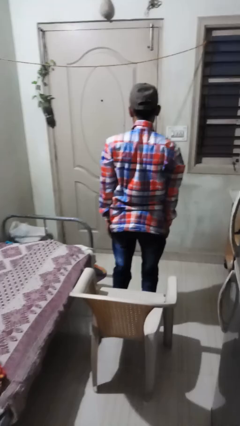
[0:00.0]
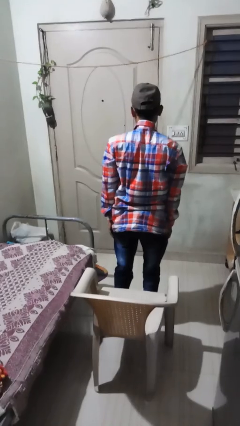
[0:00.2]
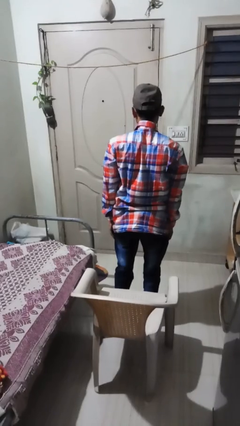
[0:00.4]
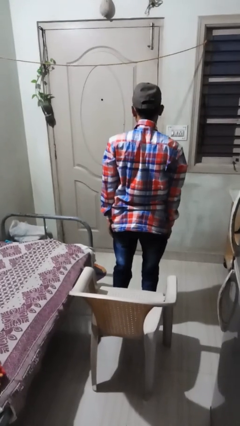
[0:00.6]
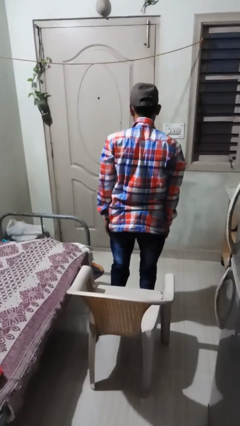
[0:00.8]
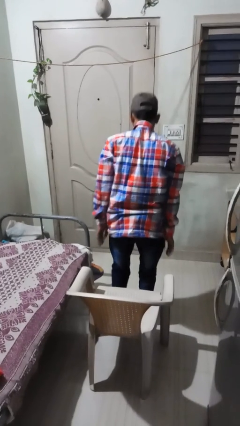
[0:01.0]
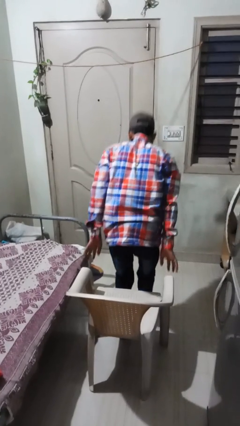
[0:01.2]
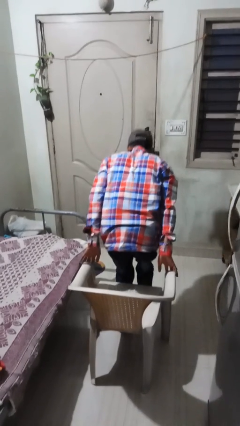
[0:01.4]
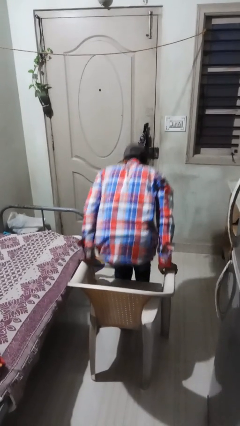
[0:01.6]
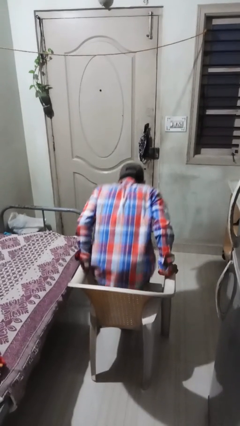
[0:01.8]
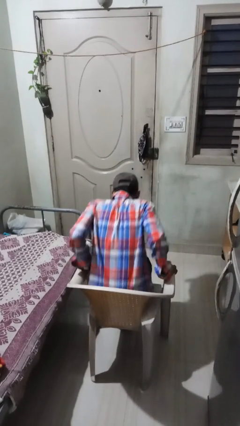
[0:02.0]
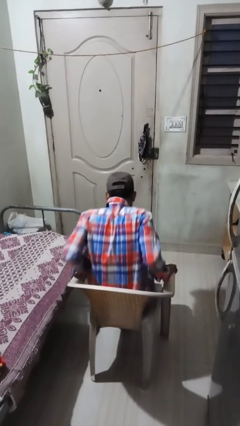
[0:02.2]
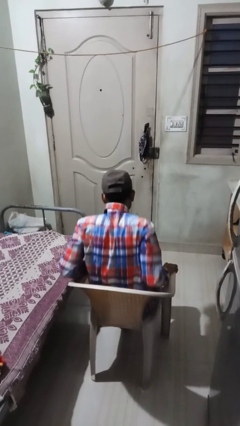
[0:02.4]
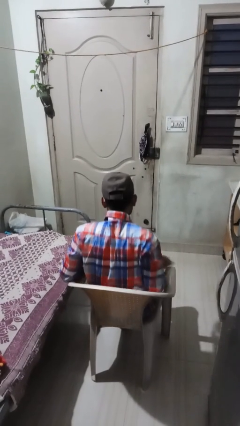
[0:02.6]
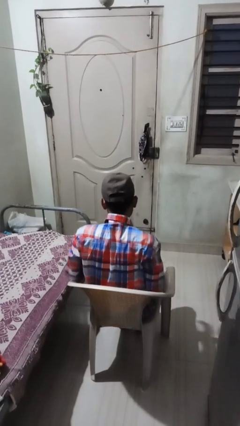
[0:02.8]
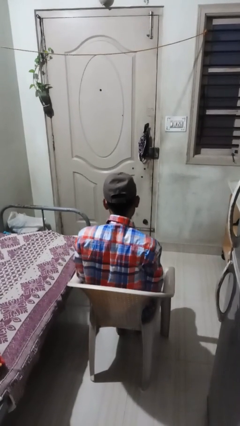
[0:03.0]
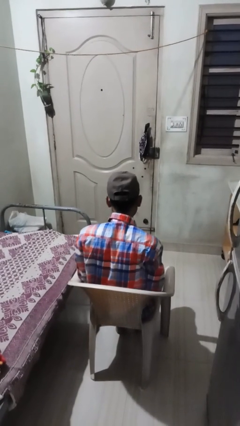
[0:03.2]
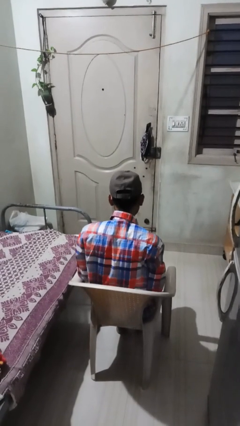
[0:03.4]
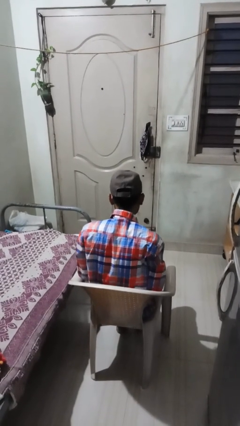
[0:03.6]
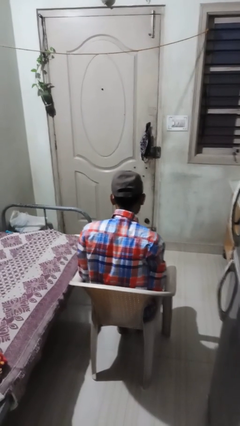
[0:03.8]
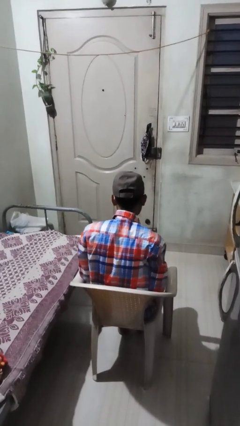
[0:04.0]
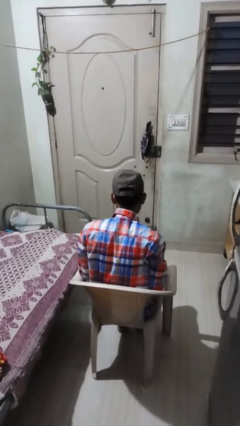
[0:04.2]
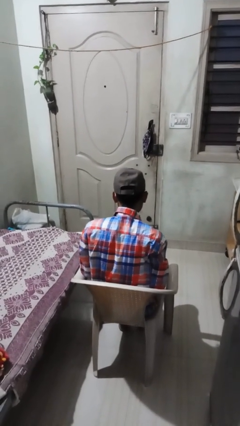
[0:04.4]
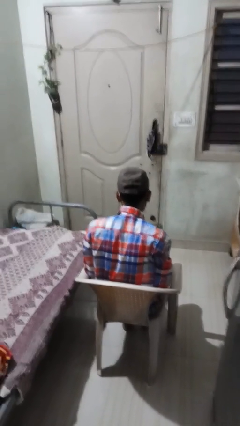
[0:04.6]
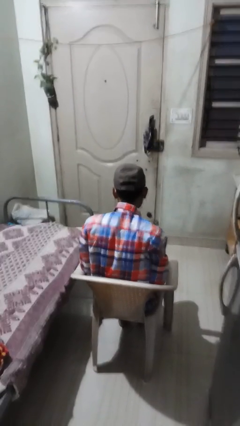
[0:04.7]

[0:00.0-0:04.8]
person sits down

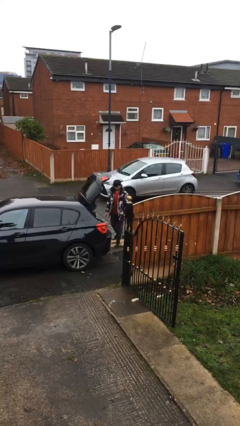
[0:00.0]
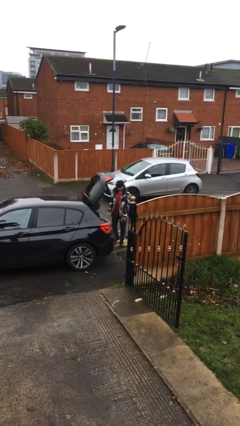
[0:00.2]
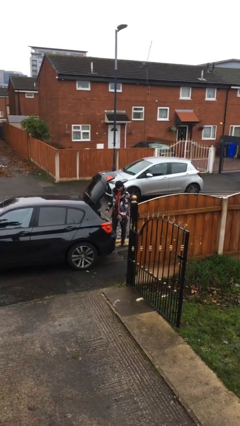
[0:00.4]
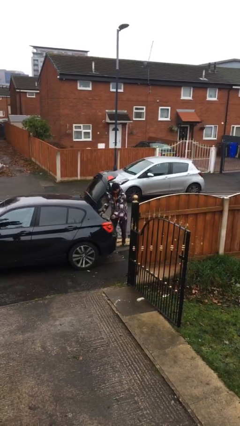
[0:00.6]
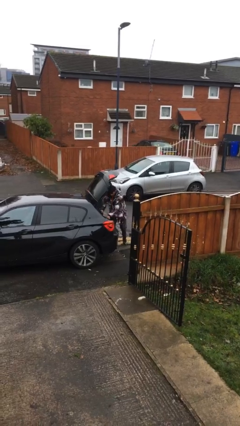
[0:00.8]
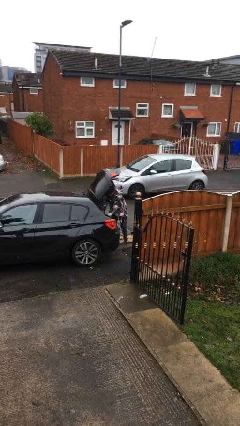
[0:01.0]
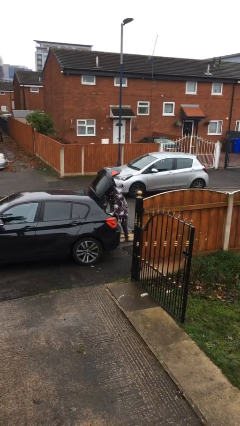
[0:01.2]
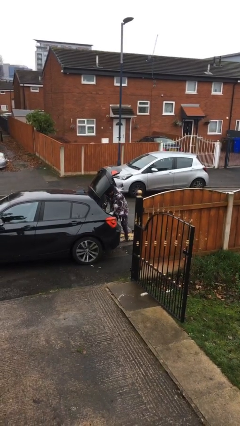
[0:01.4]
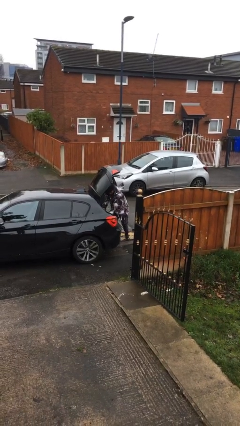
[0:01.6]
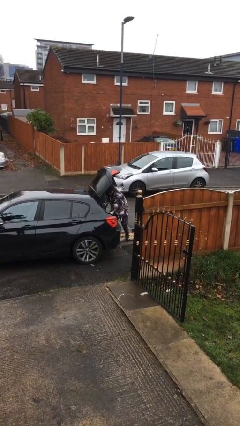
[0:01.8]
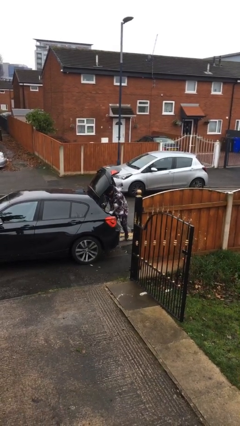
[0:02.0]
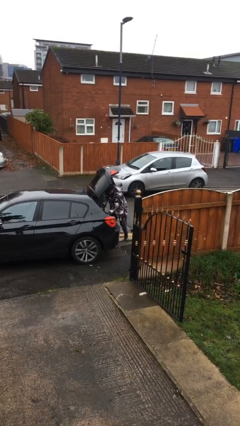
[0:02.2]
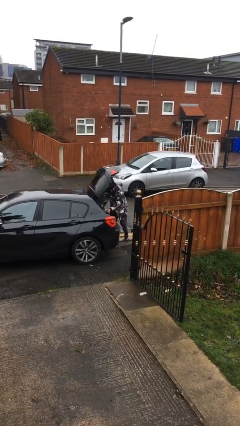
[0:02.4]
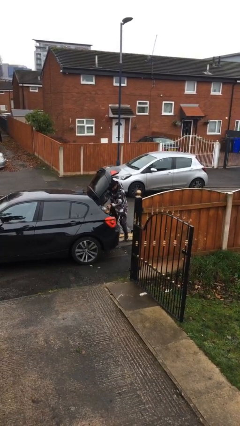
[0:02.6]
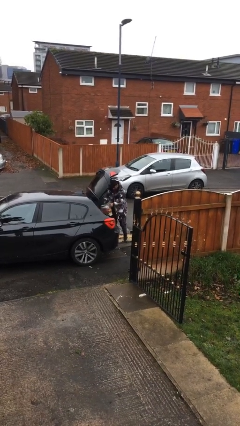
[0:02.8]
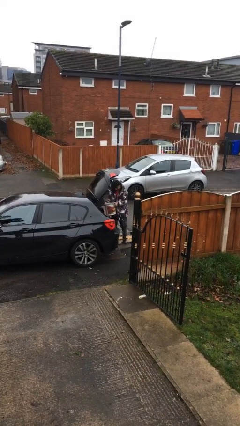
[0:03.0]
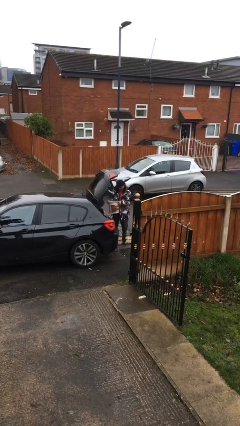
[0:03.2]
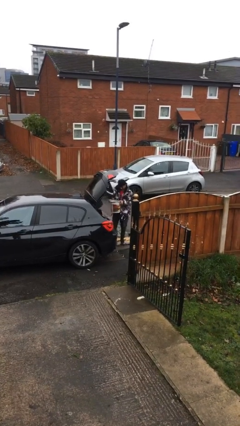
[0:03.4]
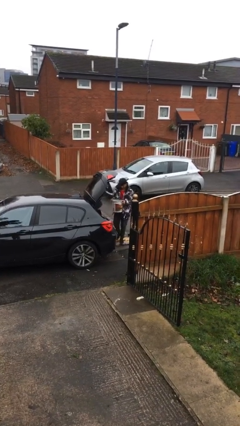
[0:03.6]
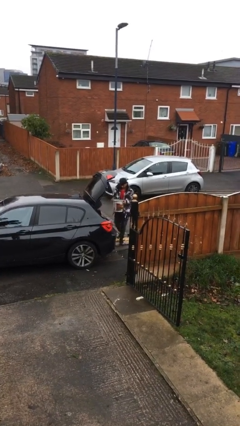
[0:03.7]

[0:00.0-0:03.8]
person unloads car

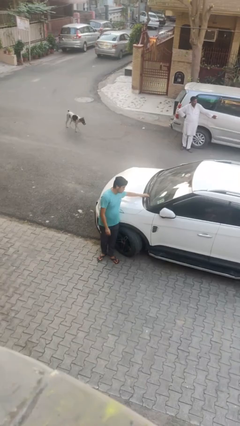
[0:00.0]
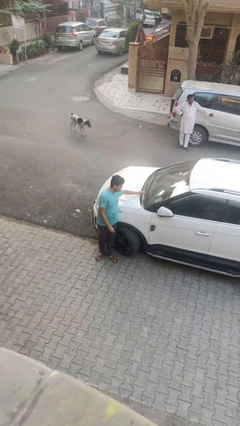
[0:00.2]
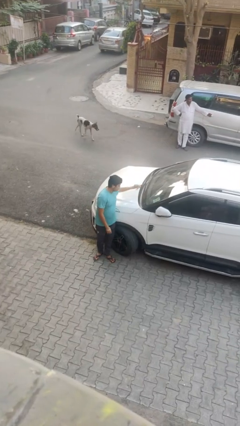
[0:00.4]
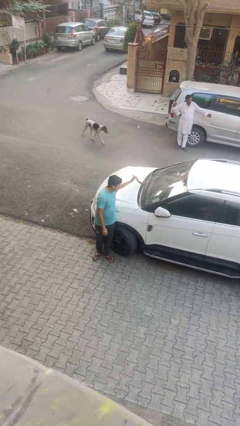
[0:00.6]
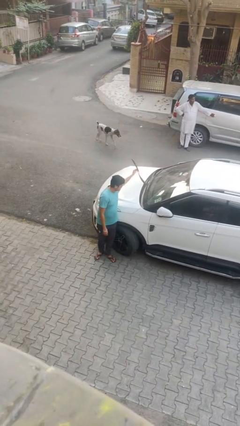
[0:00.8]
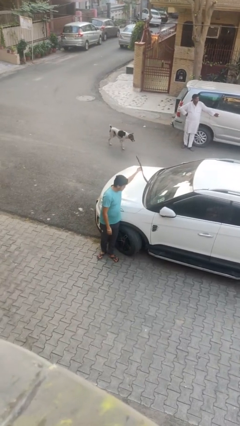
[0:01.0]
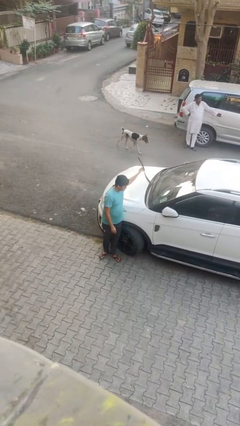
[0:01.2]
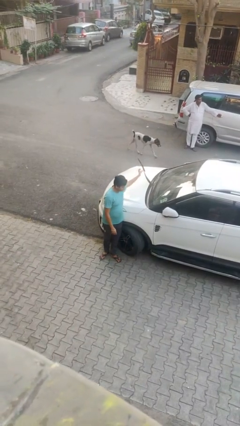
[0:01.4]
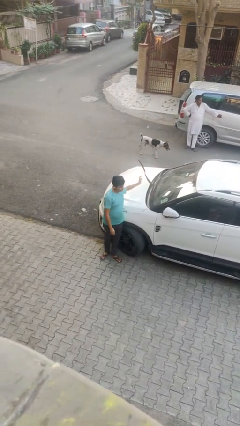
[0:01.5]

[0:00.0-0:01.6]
person flips up car wipers

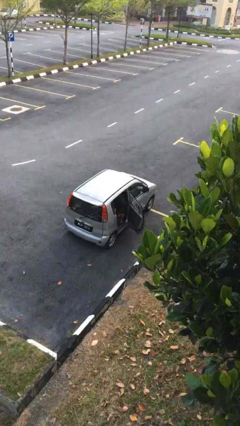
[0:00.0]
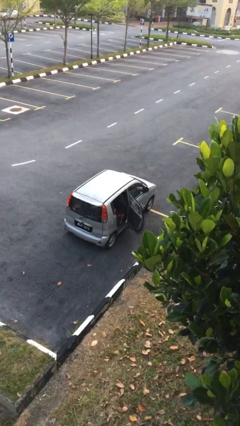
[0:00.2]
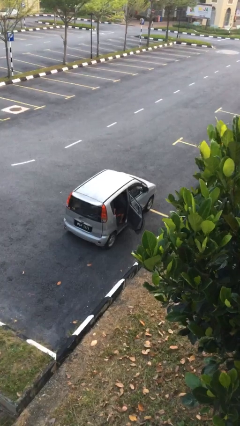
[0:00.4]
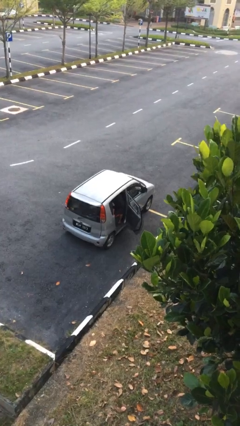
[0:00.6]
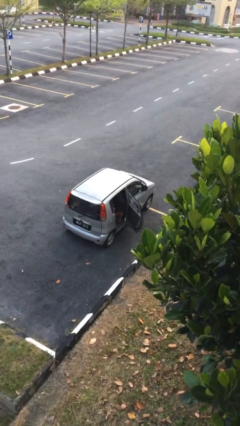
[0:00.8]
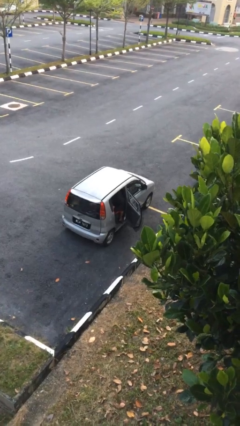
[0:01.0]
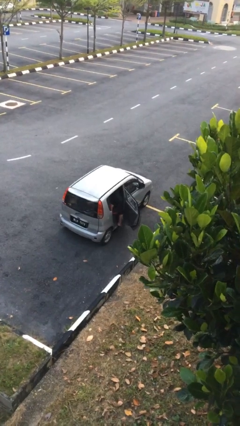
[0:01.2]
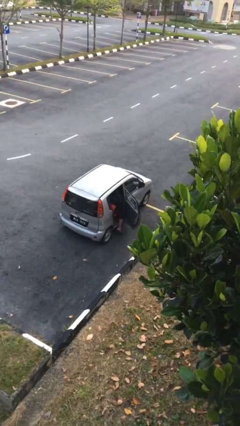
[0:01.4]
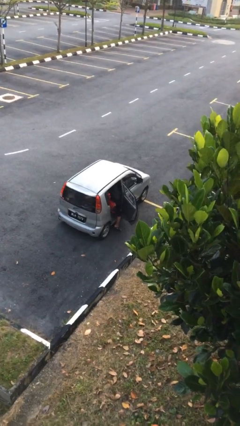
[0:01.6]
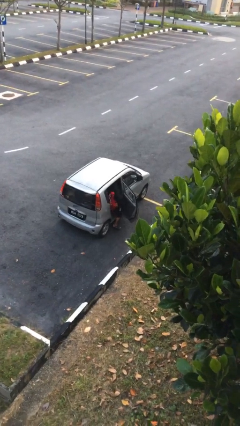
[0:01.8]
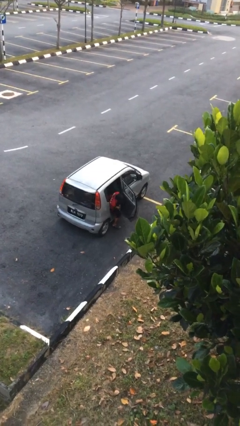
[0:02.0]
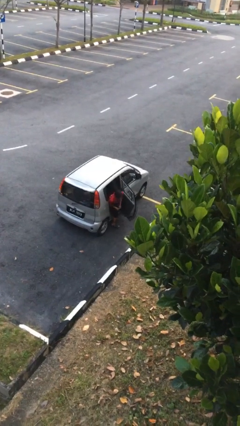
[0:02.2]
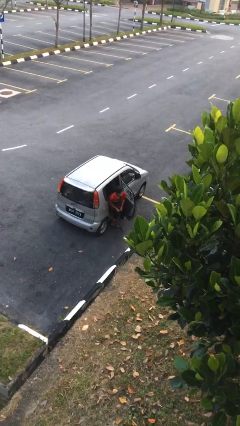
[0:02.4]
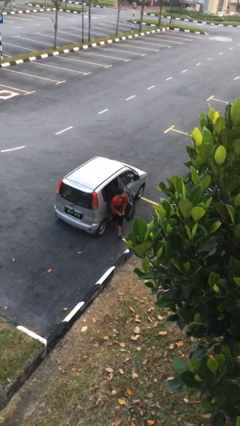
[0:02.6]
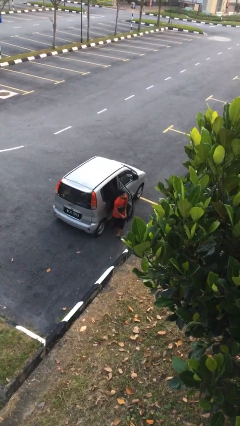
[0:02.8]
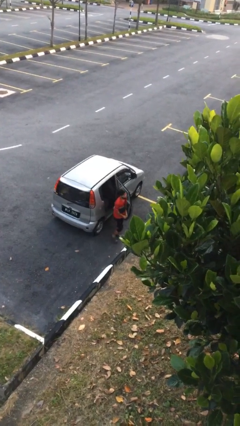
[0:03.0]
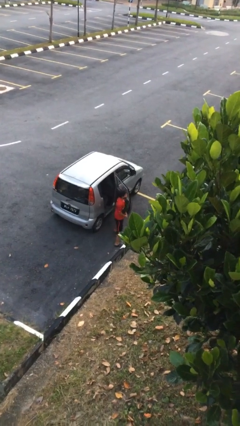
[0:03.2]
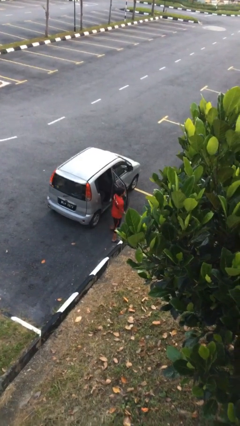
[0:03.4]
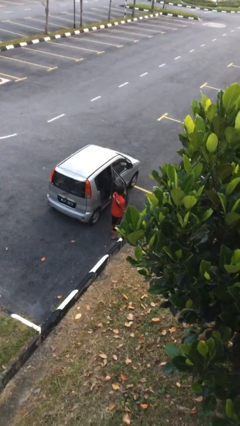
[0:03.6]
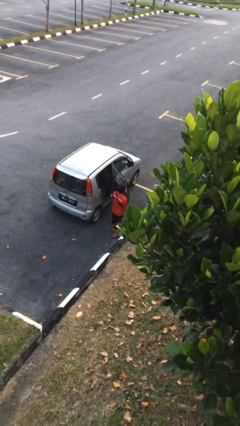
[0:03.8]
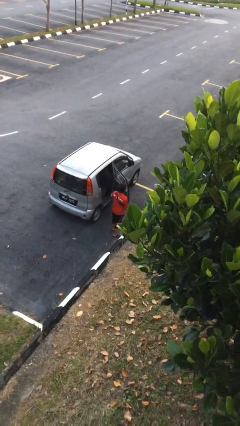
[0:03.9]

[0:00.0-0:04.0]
person exits car

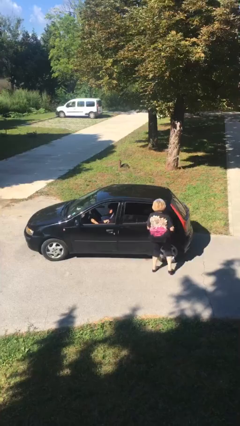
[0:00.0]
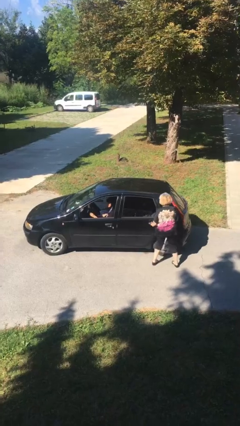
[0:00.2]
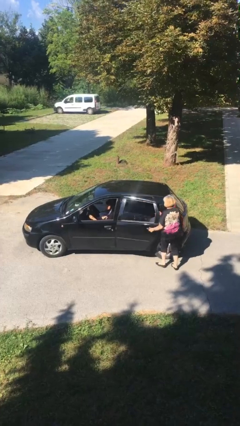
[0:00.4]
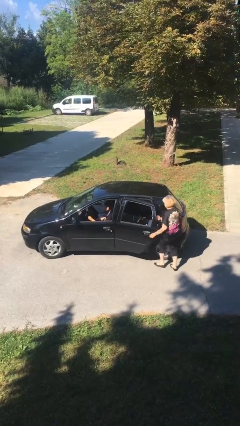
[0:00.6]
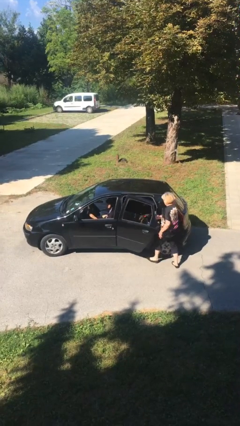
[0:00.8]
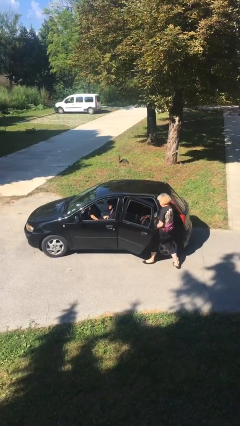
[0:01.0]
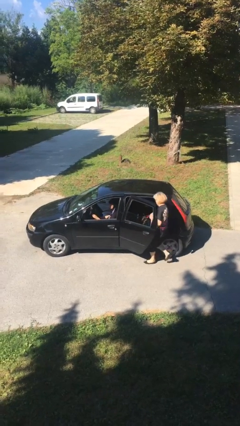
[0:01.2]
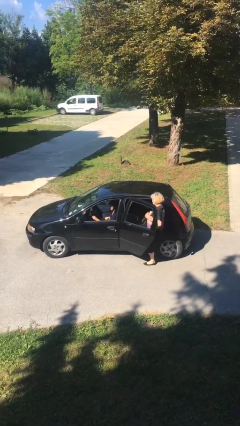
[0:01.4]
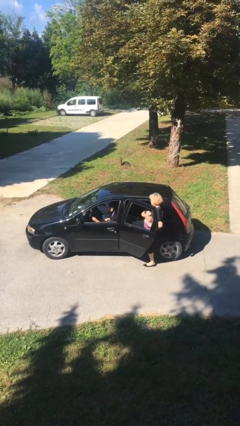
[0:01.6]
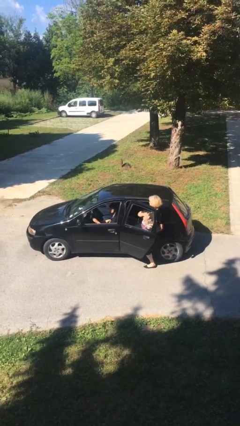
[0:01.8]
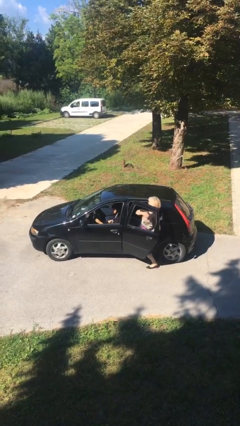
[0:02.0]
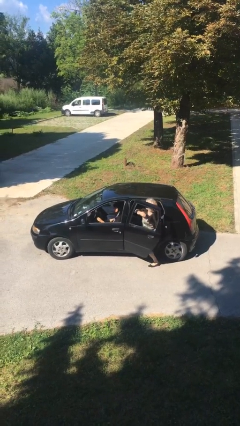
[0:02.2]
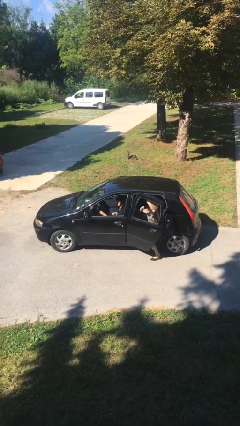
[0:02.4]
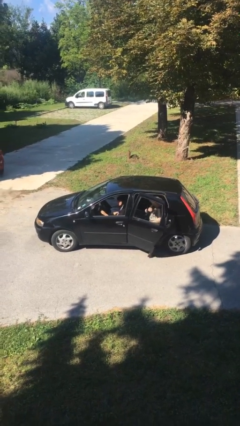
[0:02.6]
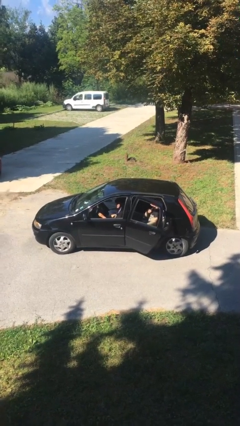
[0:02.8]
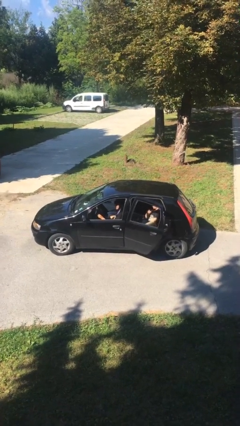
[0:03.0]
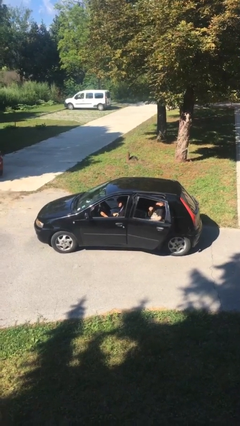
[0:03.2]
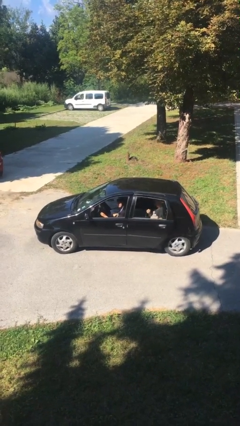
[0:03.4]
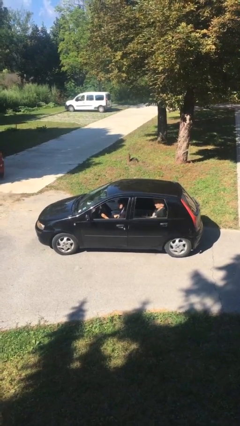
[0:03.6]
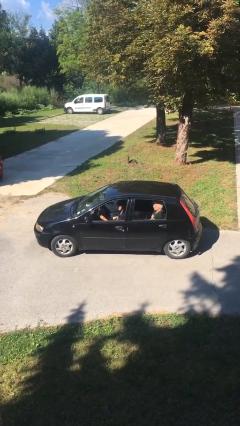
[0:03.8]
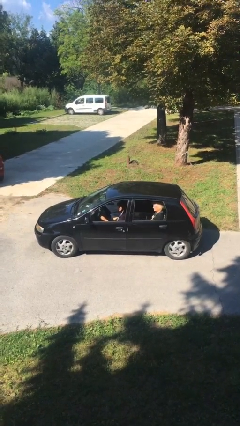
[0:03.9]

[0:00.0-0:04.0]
car picks up person
